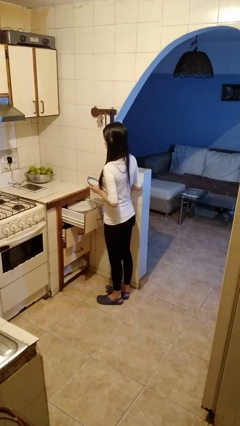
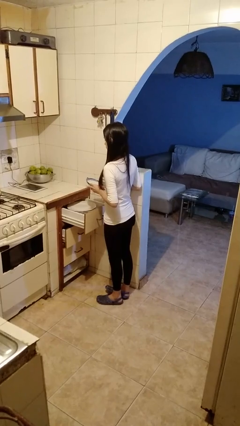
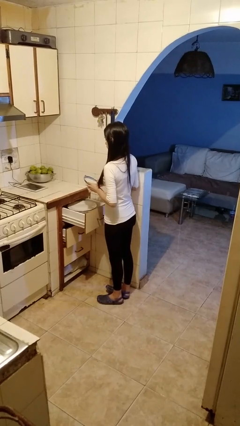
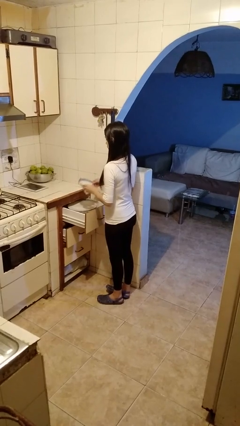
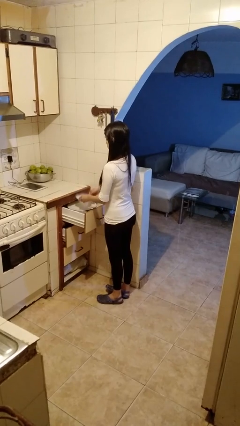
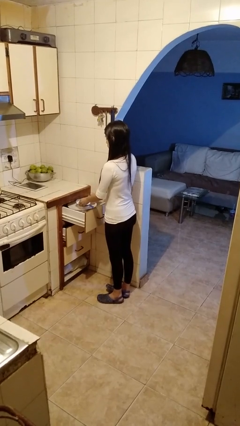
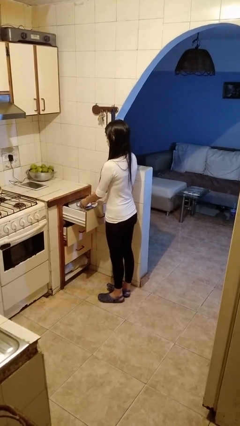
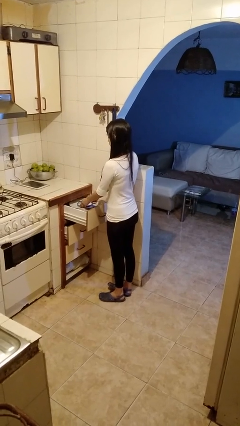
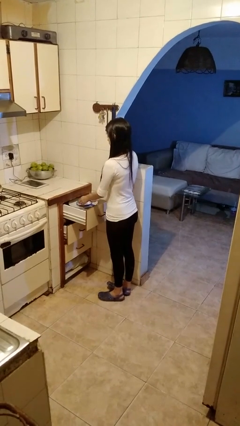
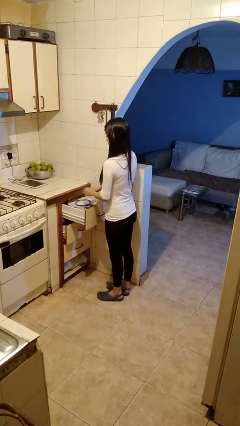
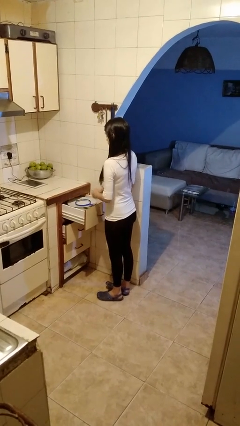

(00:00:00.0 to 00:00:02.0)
person puts down object into cabinet

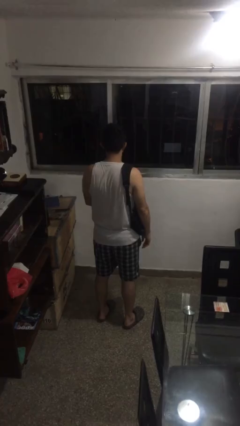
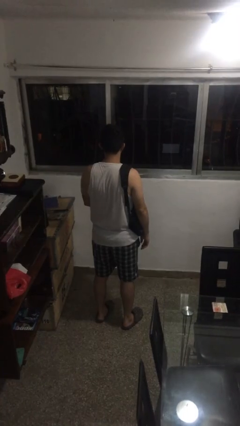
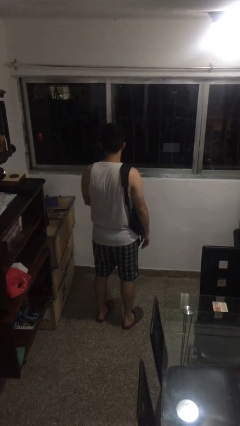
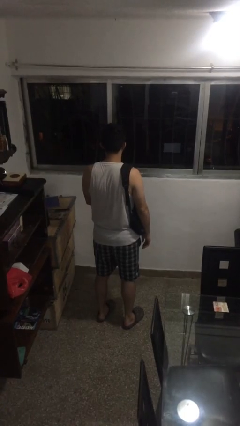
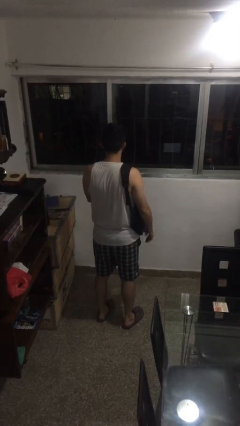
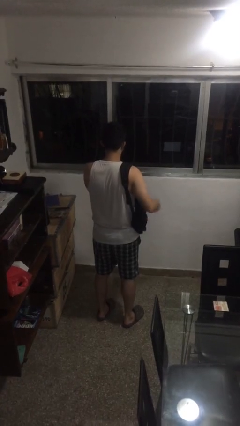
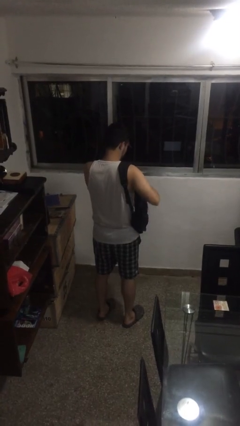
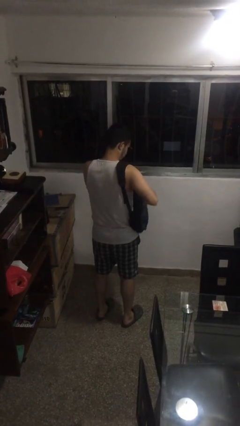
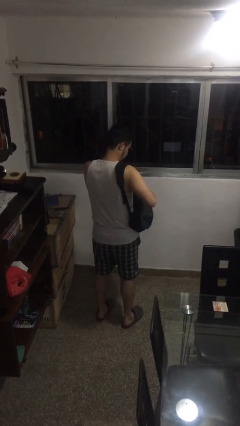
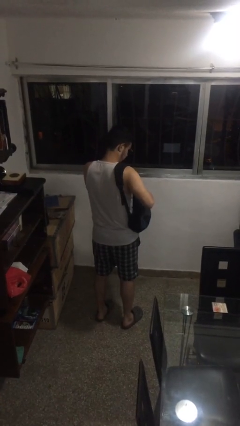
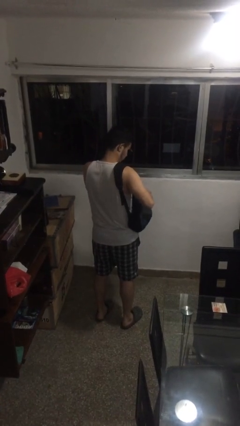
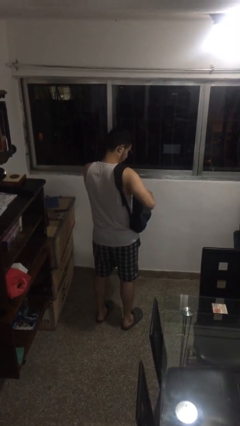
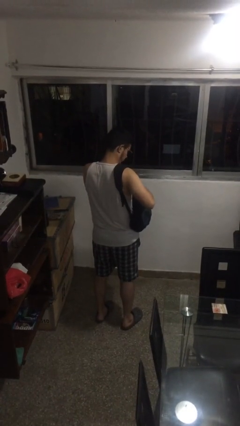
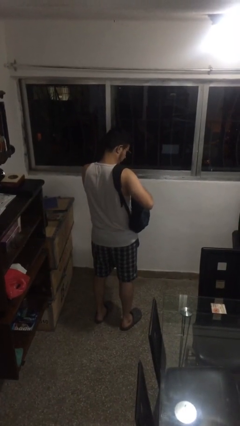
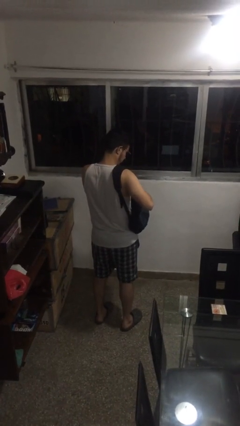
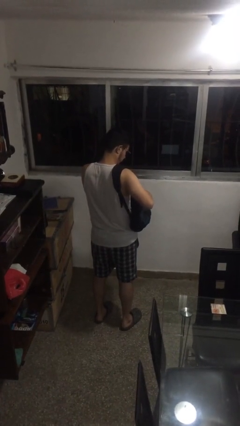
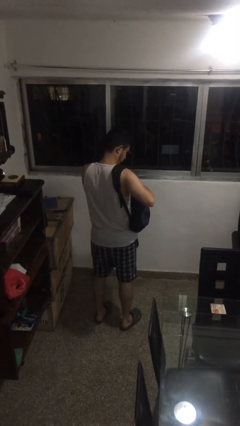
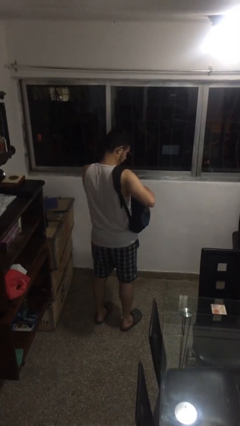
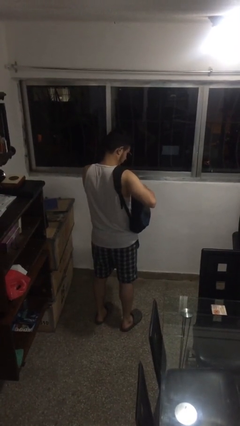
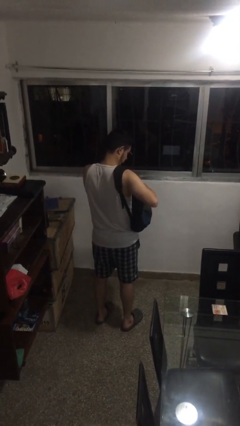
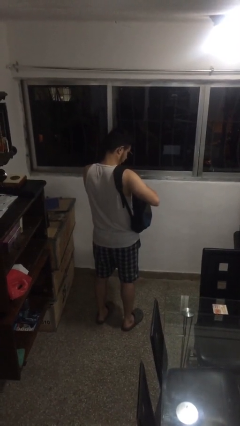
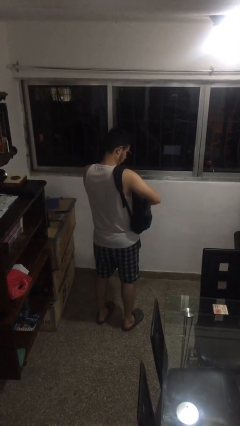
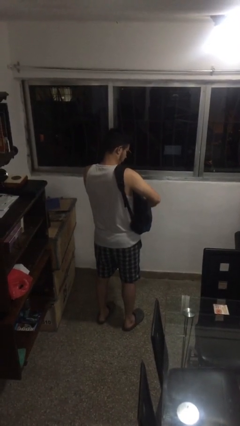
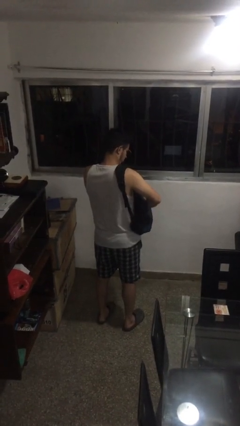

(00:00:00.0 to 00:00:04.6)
person searches in backpack

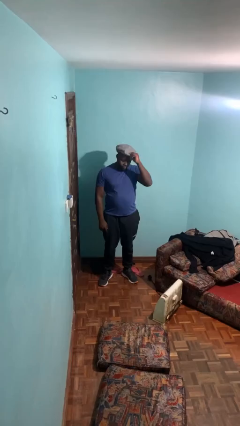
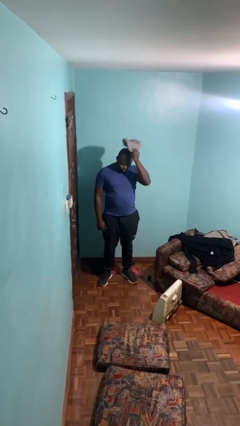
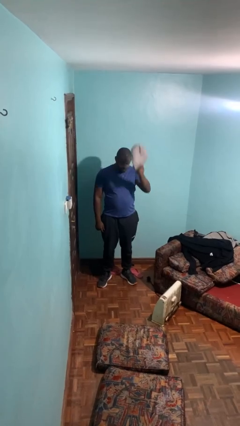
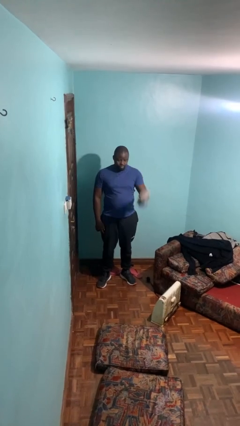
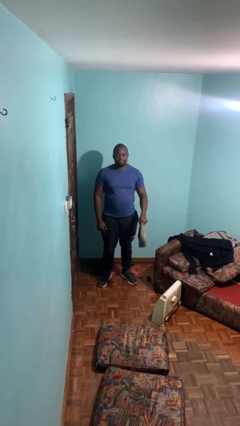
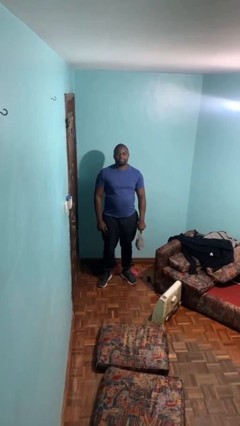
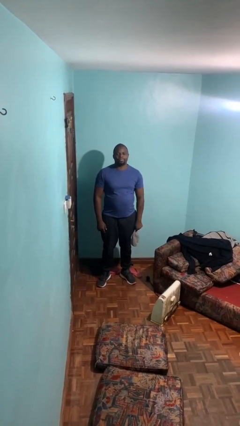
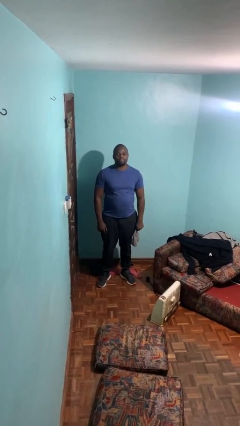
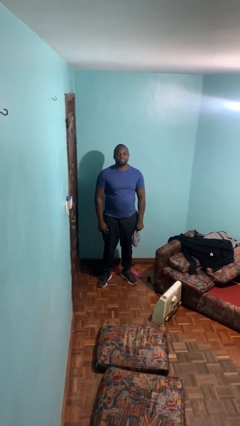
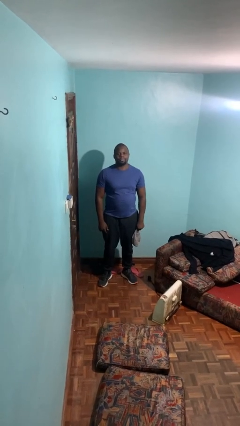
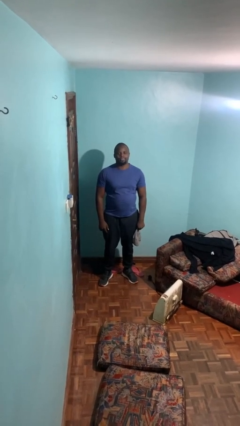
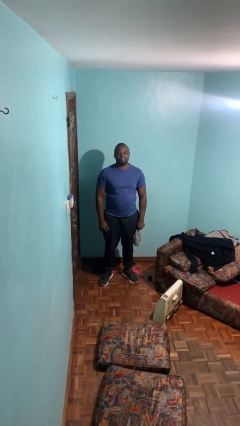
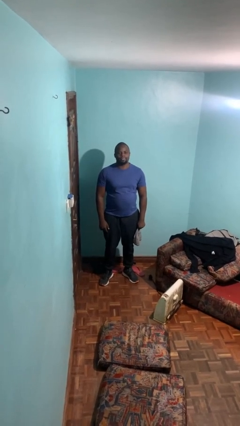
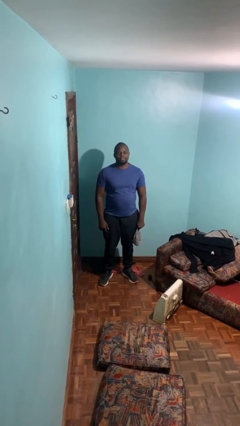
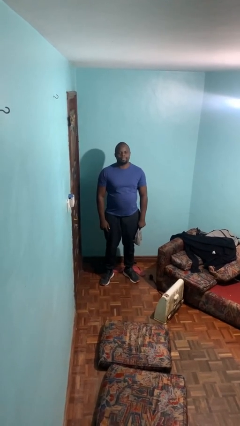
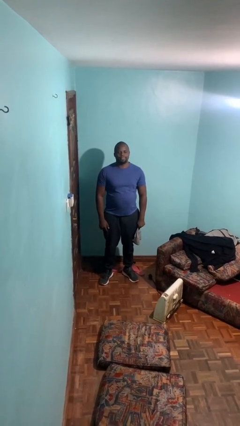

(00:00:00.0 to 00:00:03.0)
person takes off hat

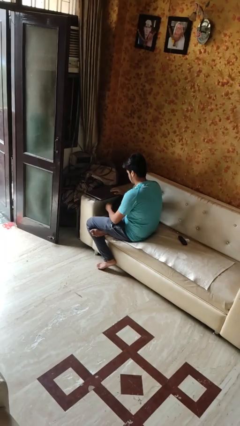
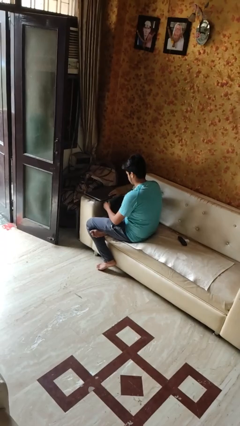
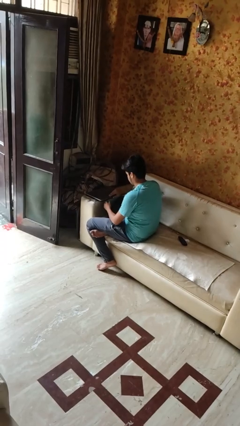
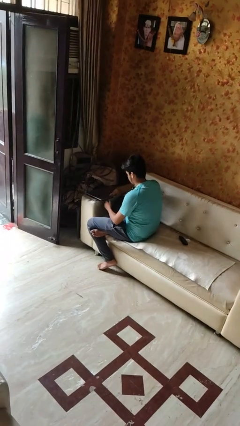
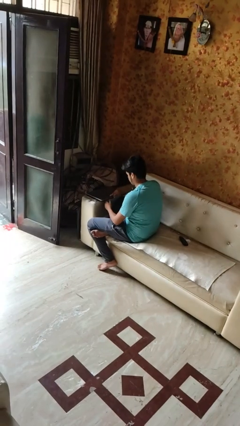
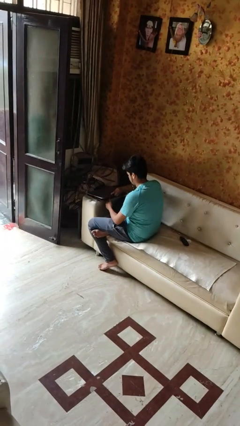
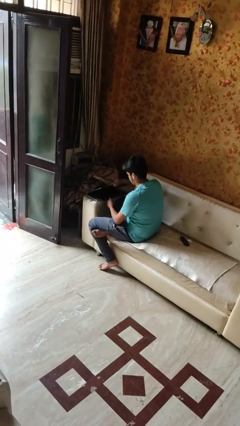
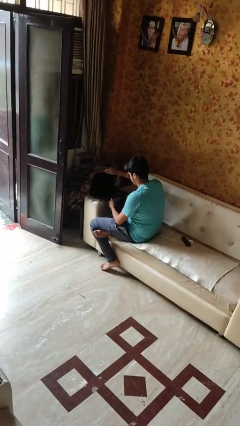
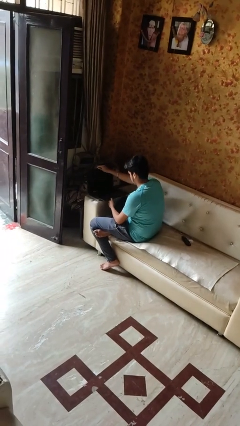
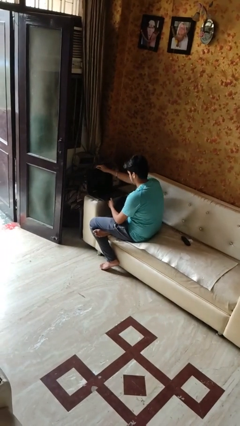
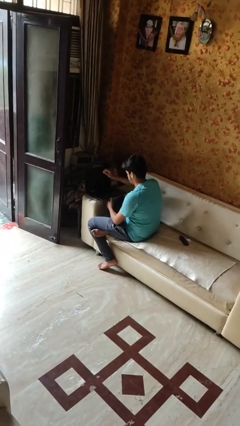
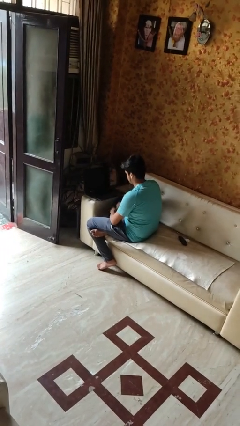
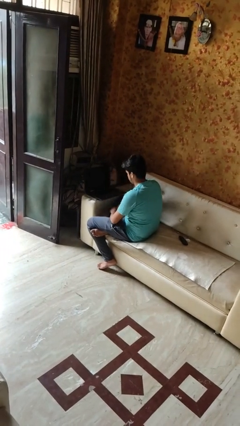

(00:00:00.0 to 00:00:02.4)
person opens laptop

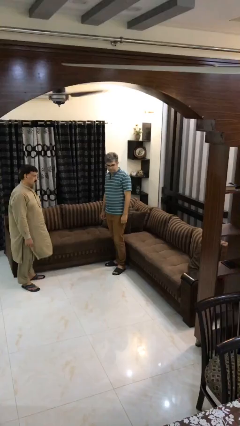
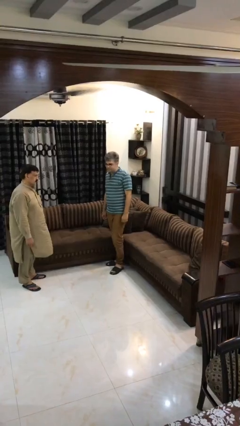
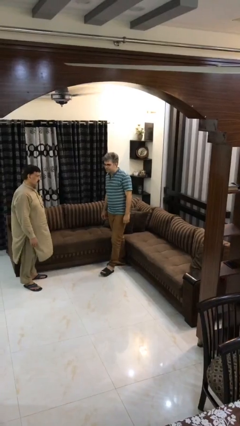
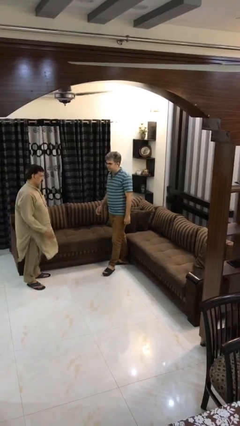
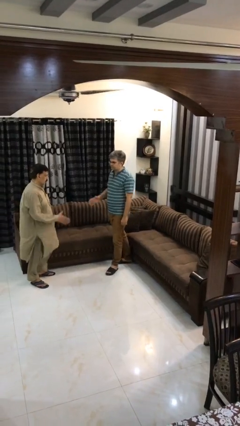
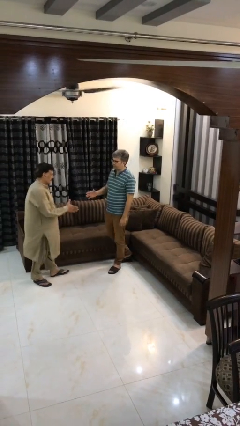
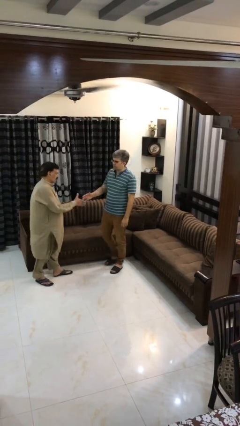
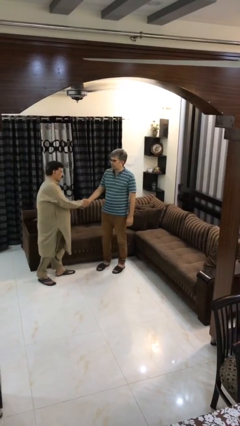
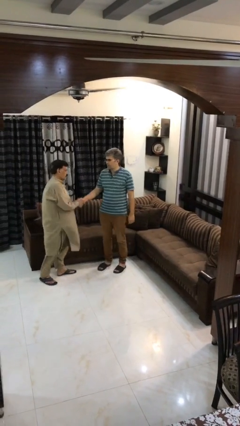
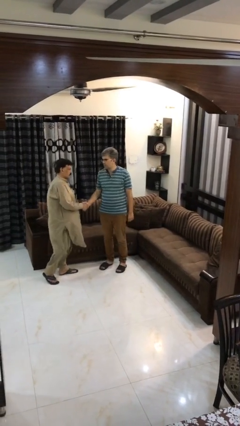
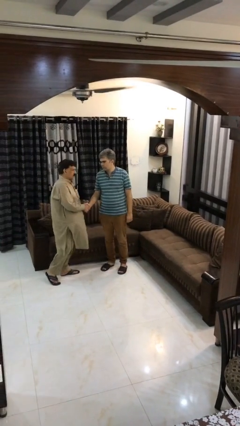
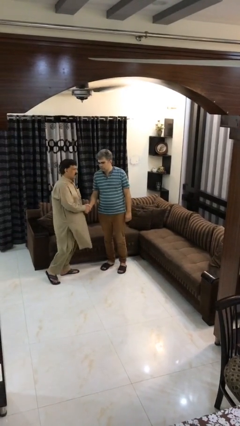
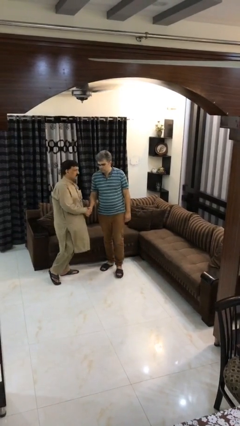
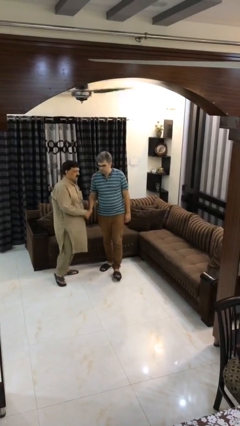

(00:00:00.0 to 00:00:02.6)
person shakes hand

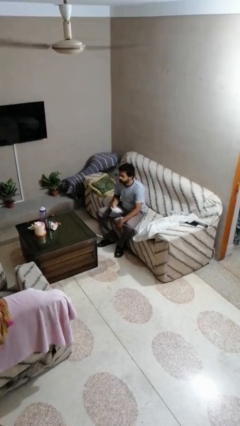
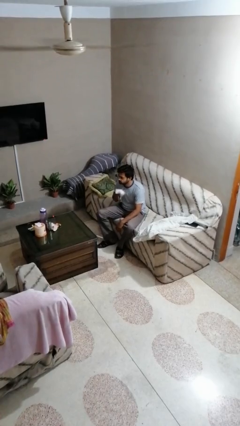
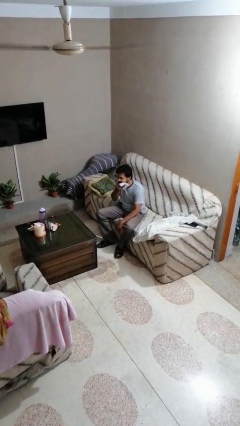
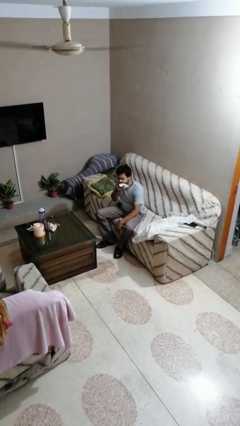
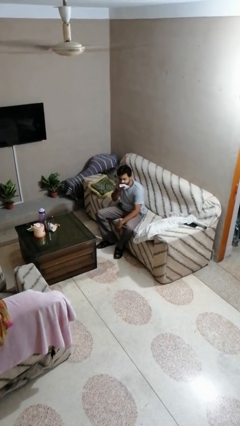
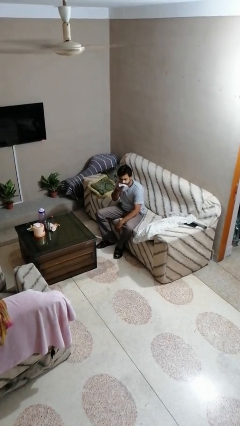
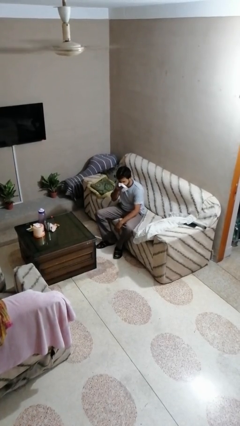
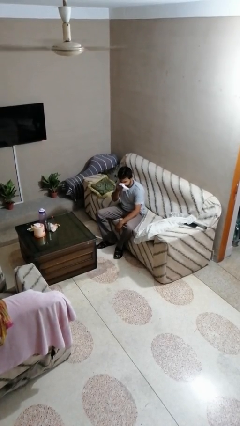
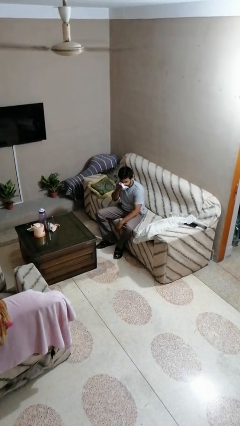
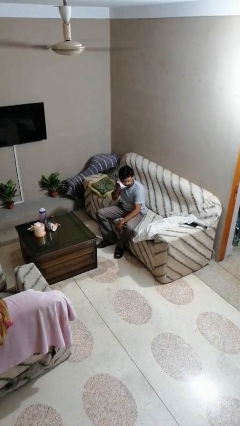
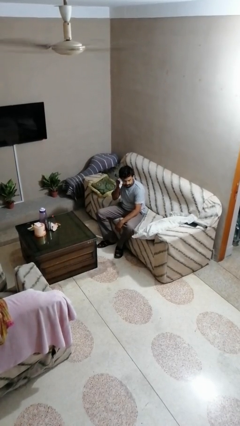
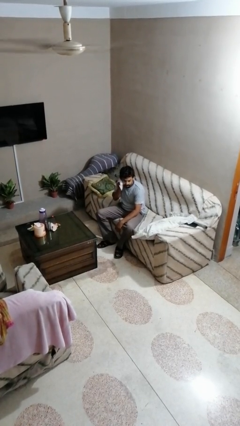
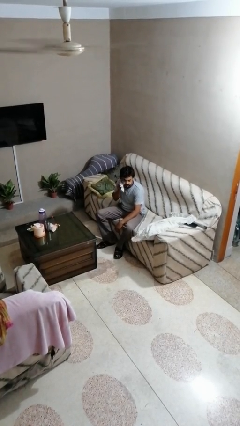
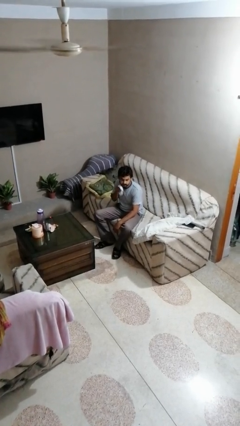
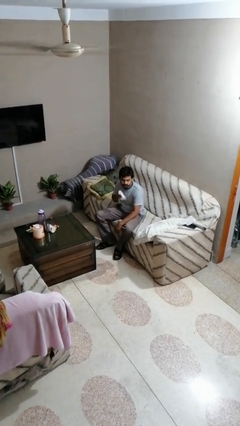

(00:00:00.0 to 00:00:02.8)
person wipes mouth with napkin
